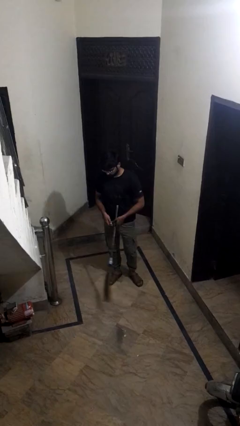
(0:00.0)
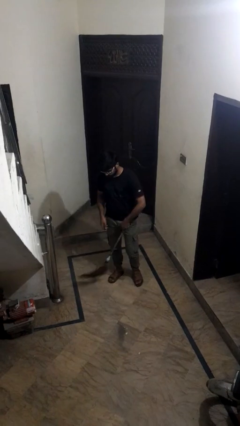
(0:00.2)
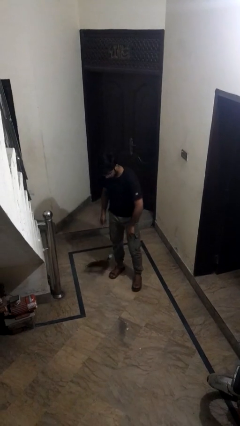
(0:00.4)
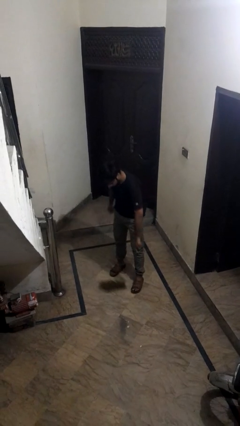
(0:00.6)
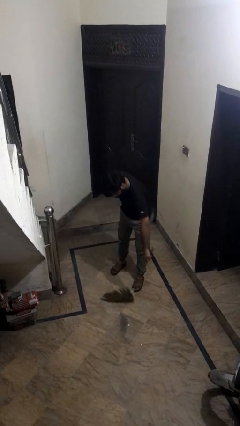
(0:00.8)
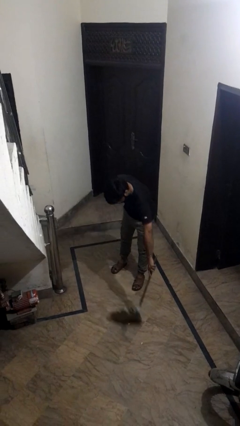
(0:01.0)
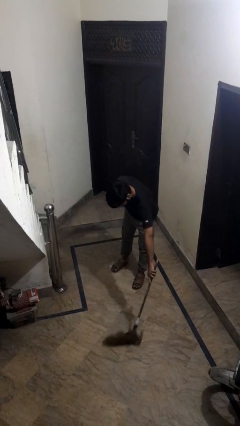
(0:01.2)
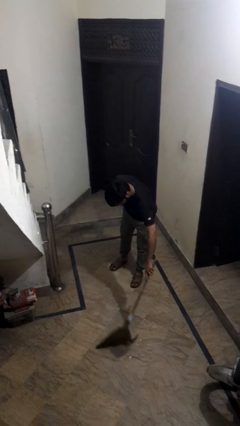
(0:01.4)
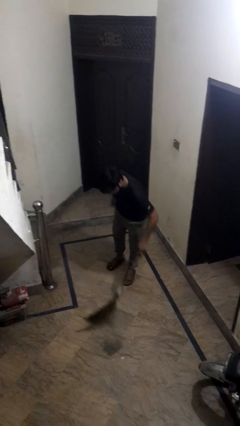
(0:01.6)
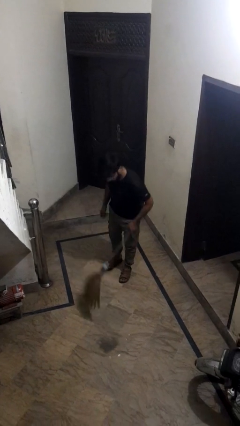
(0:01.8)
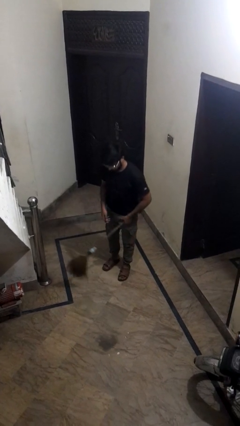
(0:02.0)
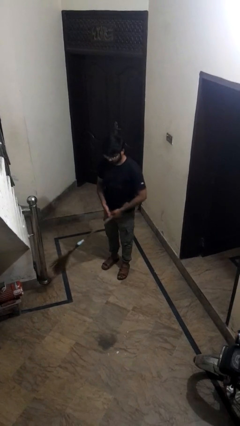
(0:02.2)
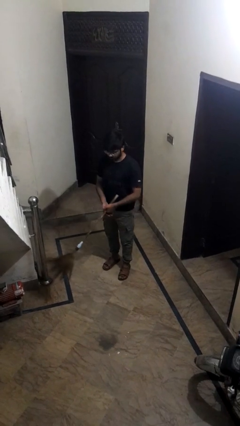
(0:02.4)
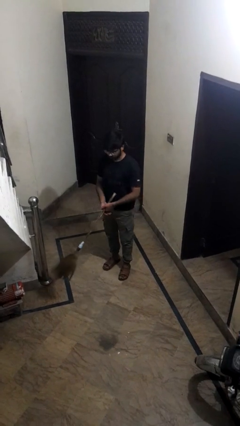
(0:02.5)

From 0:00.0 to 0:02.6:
person sweeps floor

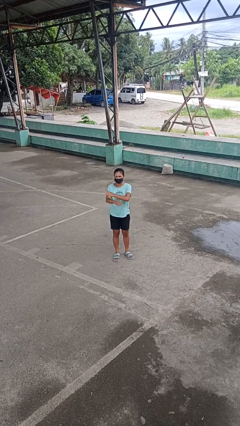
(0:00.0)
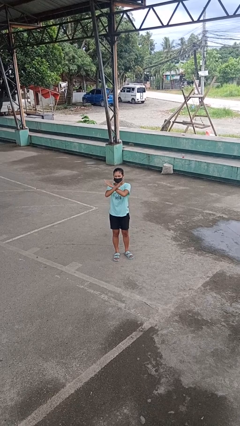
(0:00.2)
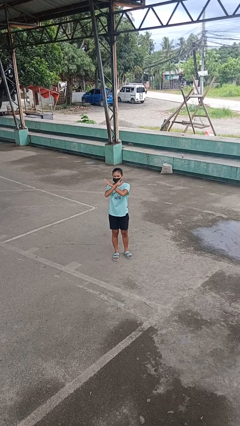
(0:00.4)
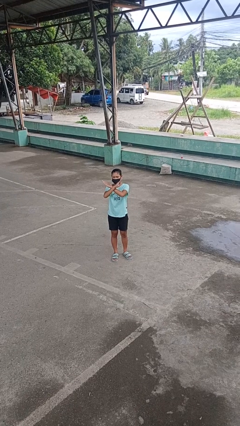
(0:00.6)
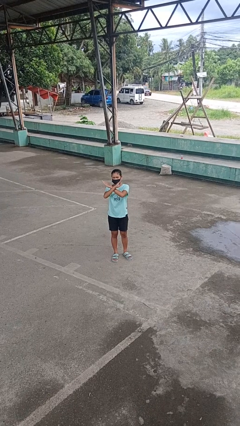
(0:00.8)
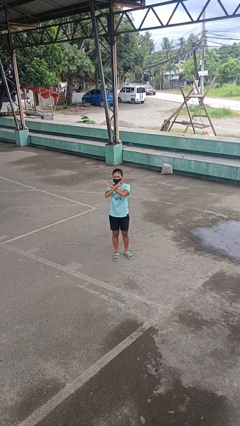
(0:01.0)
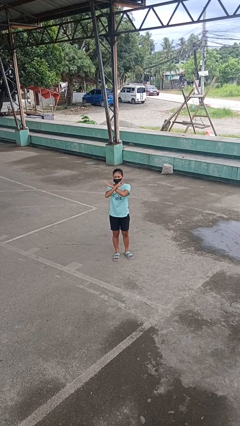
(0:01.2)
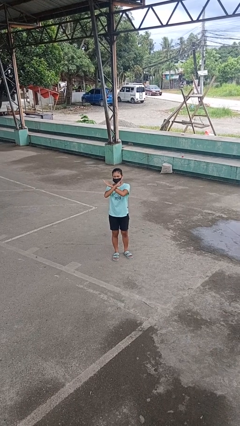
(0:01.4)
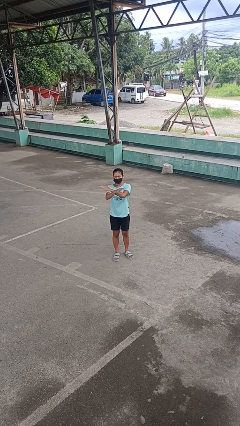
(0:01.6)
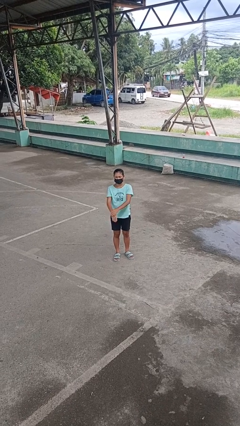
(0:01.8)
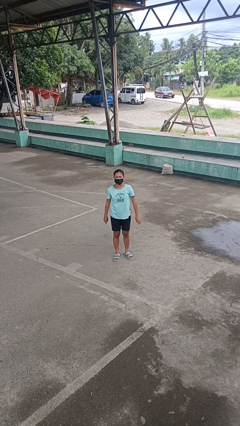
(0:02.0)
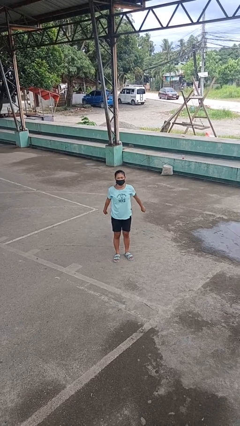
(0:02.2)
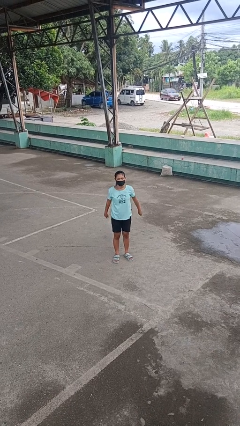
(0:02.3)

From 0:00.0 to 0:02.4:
person gestures arms x

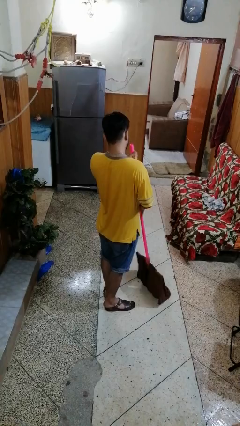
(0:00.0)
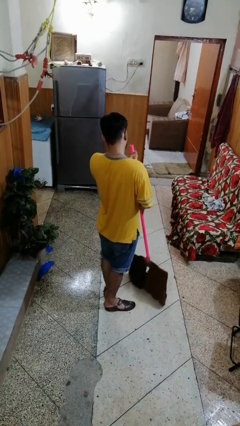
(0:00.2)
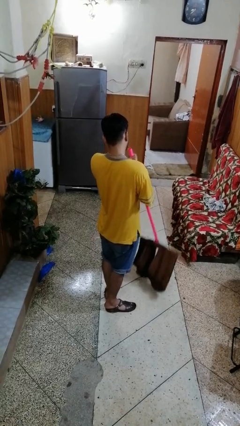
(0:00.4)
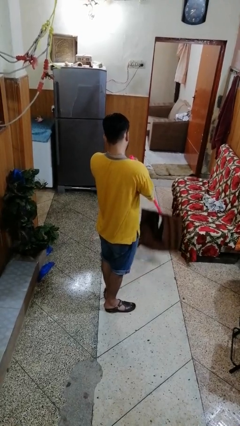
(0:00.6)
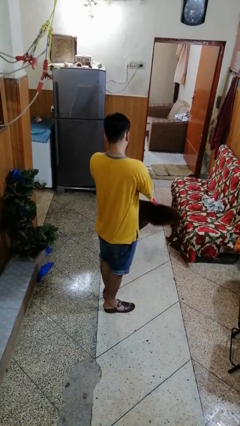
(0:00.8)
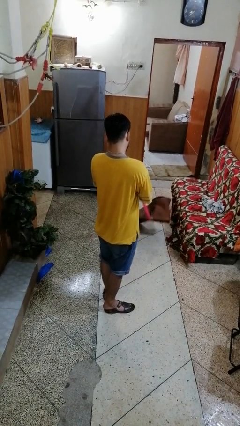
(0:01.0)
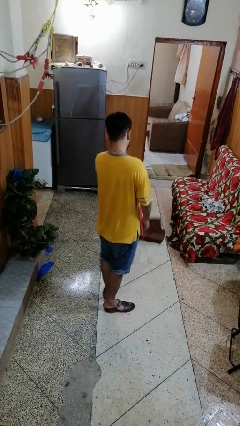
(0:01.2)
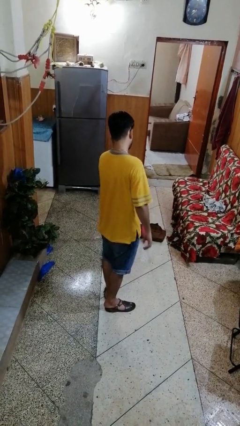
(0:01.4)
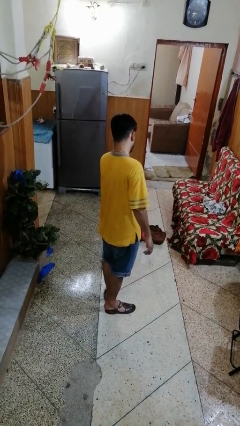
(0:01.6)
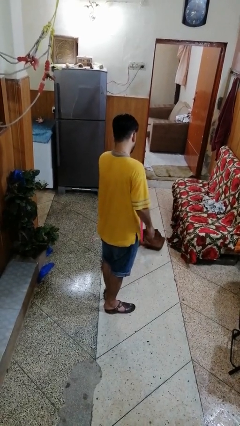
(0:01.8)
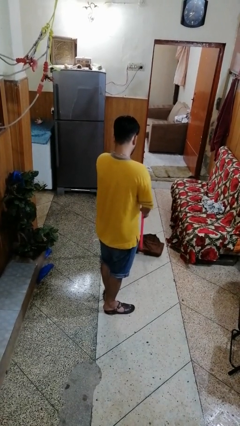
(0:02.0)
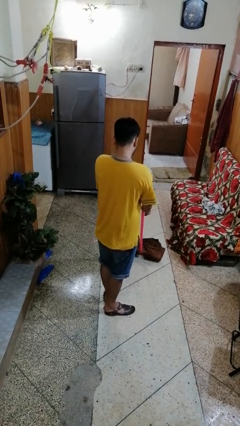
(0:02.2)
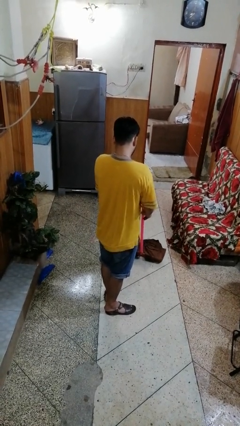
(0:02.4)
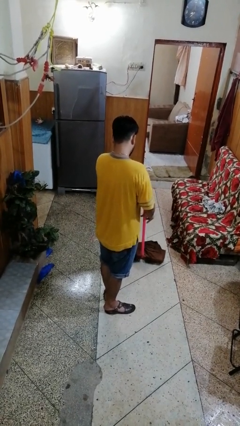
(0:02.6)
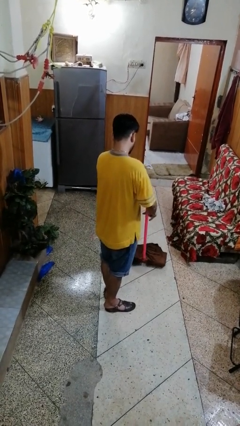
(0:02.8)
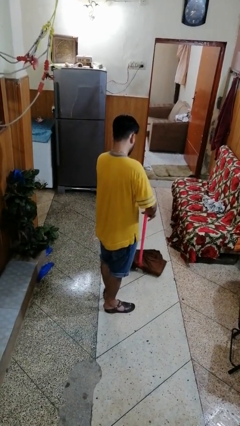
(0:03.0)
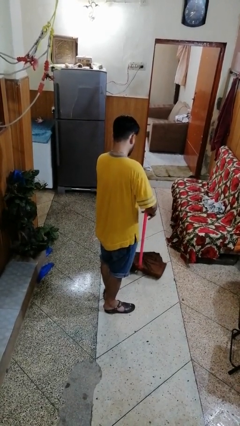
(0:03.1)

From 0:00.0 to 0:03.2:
person mops

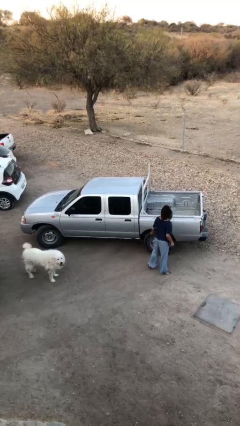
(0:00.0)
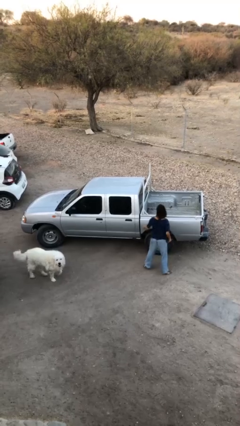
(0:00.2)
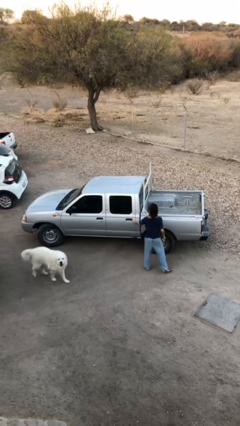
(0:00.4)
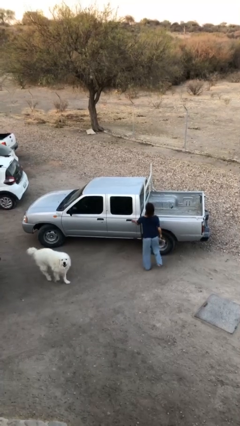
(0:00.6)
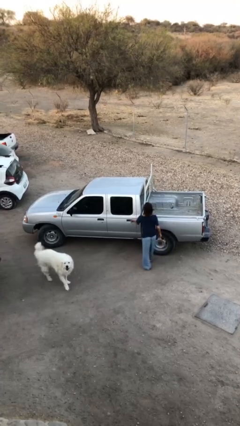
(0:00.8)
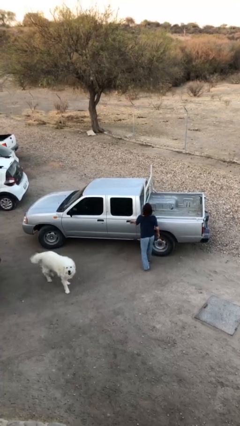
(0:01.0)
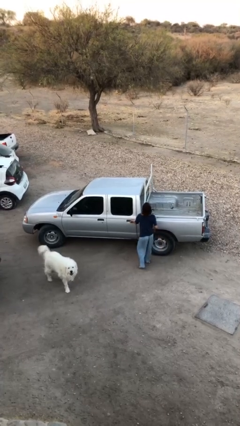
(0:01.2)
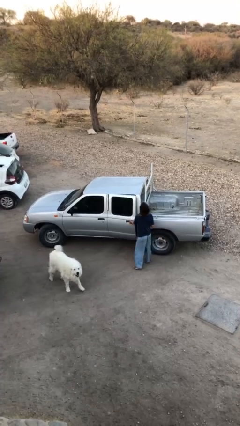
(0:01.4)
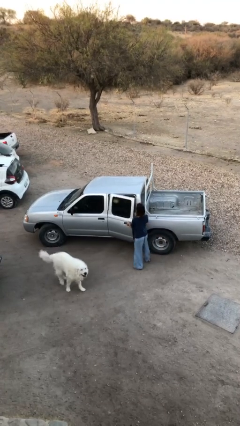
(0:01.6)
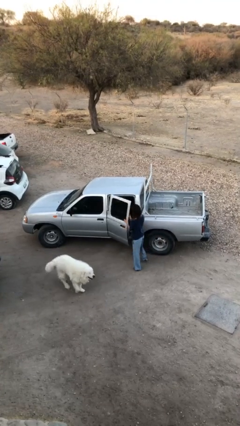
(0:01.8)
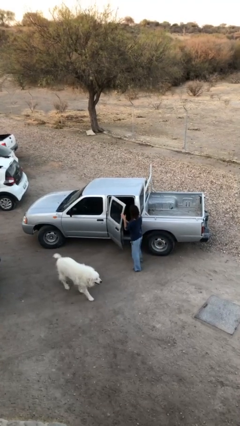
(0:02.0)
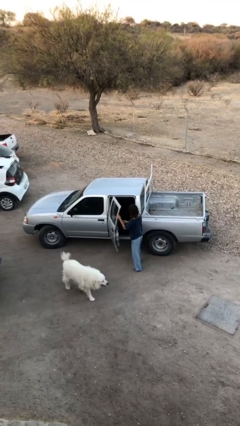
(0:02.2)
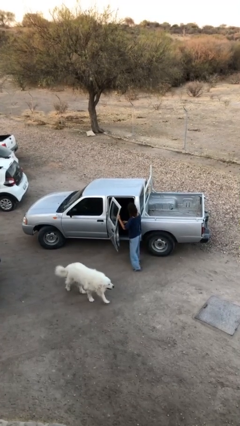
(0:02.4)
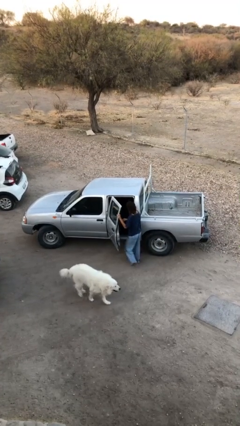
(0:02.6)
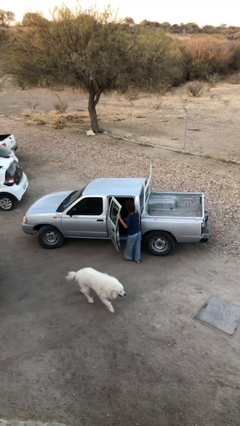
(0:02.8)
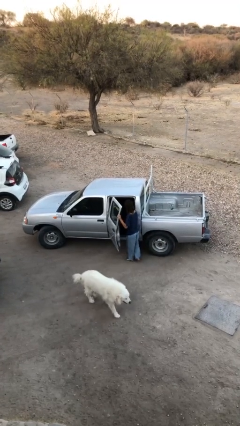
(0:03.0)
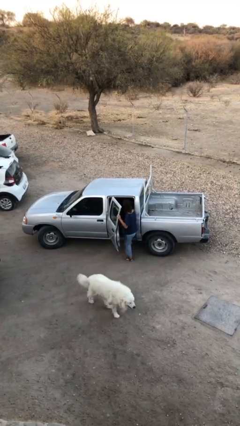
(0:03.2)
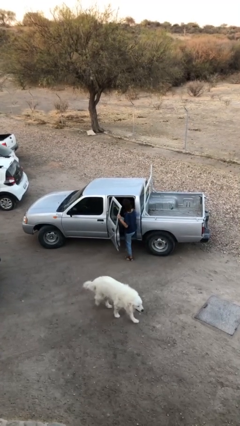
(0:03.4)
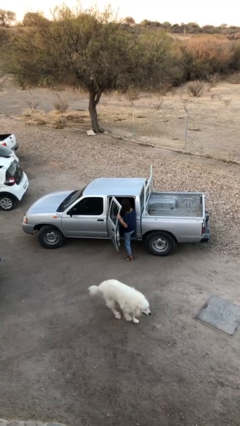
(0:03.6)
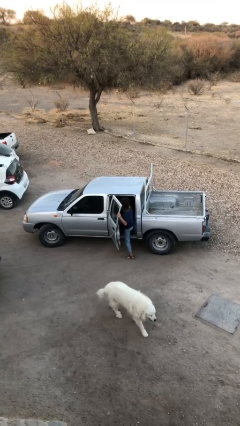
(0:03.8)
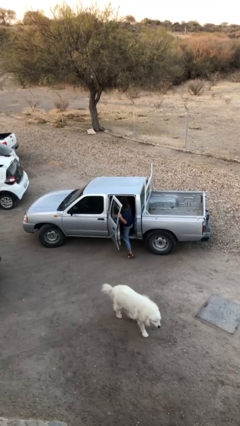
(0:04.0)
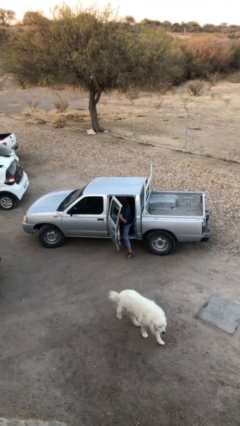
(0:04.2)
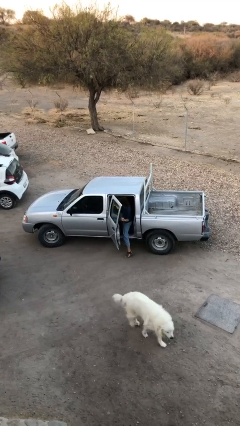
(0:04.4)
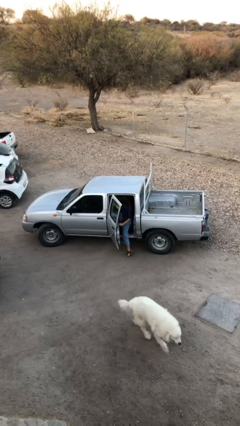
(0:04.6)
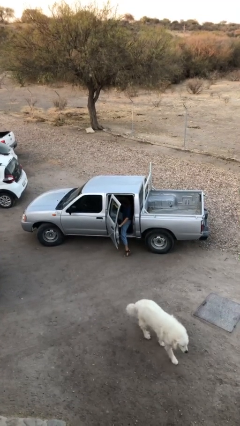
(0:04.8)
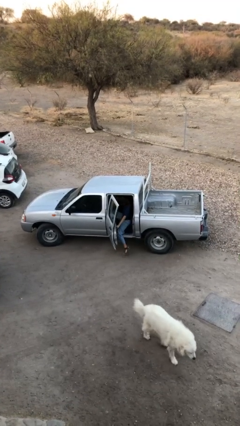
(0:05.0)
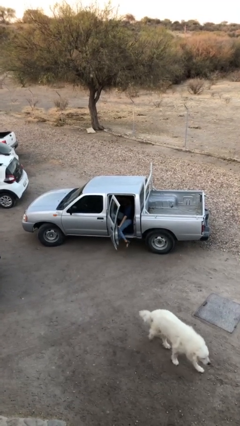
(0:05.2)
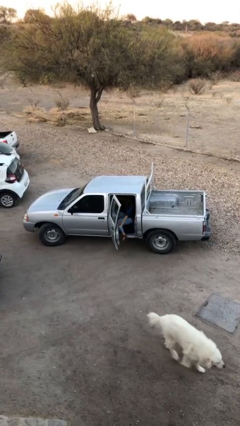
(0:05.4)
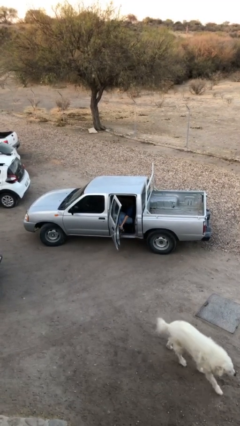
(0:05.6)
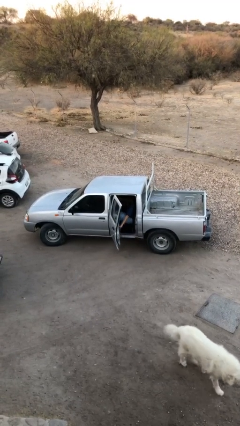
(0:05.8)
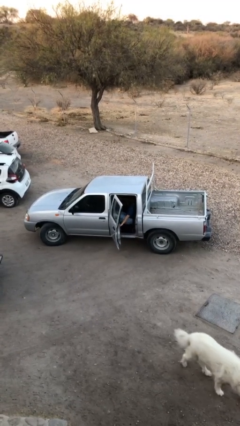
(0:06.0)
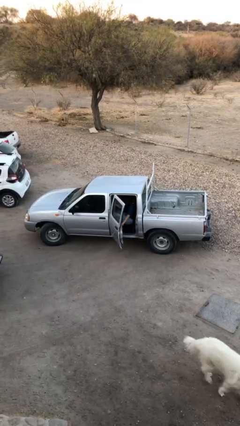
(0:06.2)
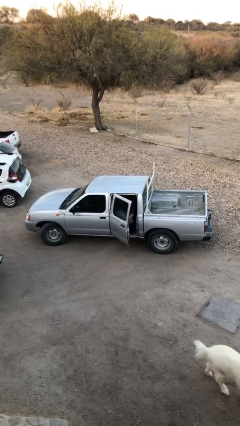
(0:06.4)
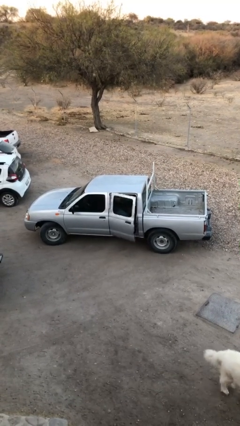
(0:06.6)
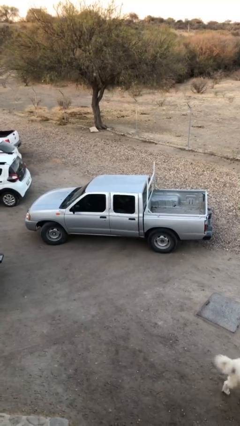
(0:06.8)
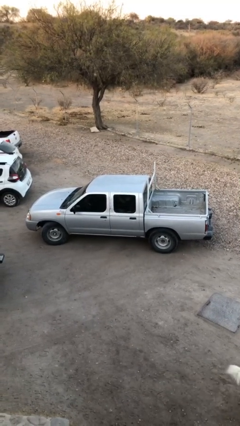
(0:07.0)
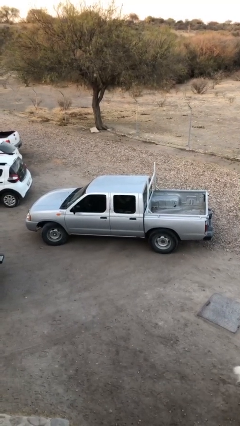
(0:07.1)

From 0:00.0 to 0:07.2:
car picks up person

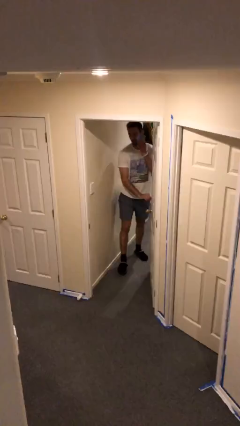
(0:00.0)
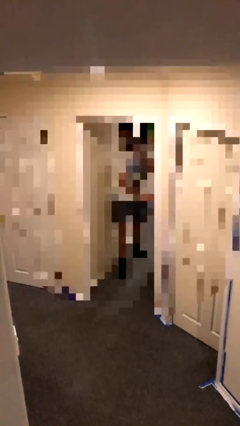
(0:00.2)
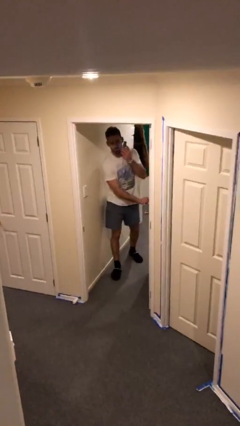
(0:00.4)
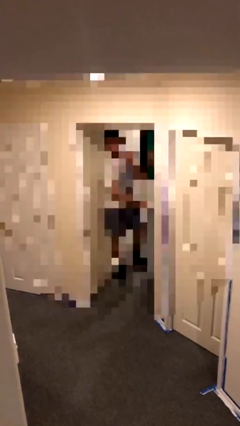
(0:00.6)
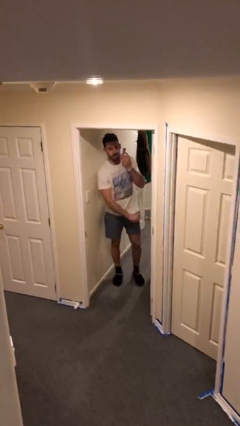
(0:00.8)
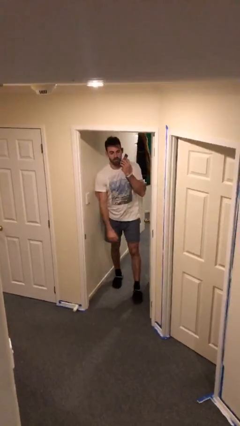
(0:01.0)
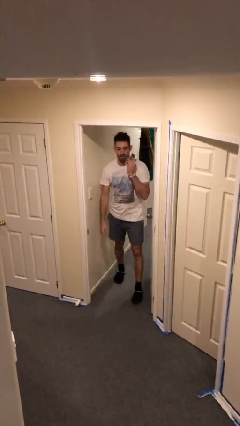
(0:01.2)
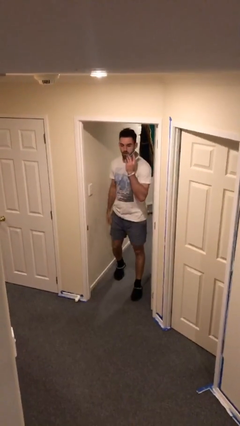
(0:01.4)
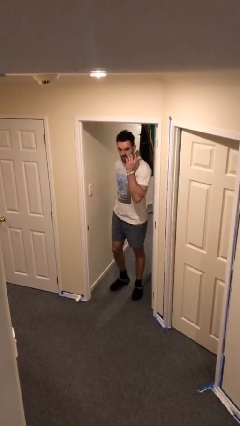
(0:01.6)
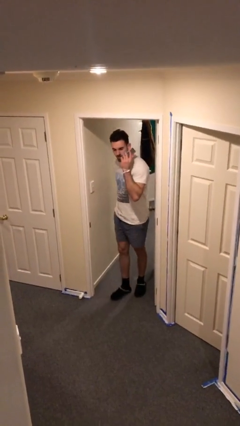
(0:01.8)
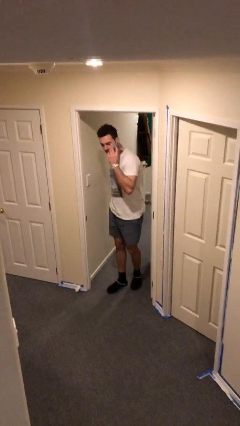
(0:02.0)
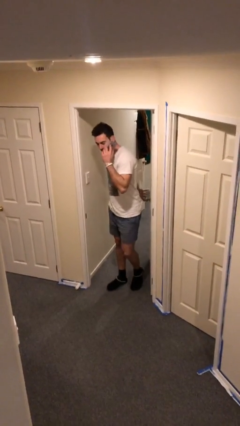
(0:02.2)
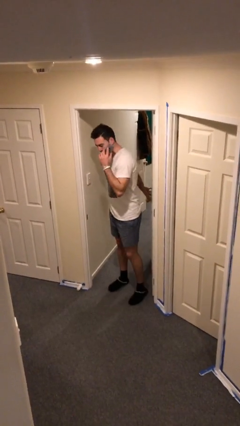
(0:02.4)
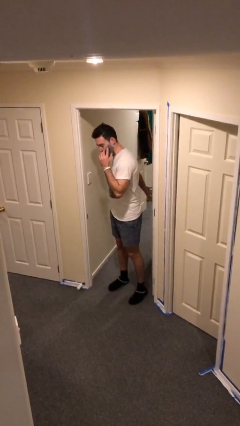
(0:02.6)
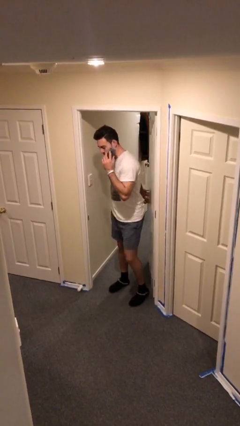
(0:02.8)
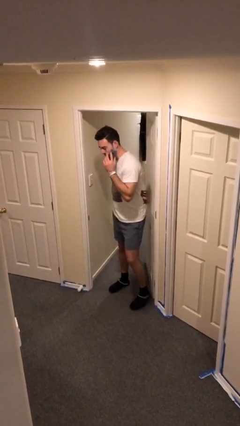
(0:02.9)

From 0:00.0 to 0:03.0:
person enters scene through structure
